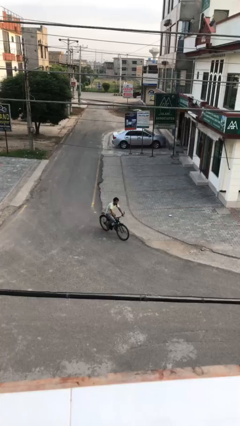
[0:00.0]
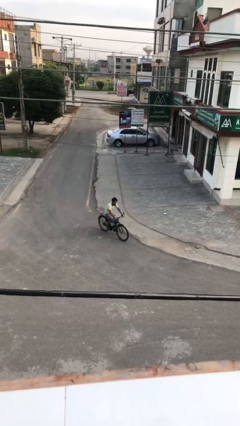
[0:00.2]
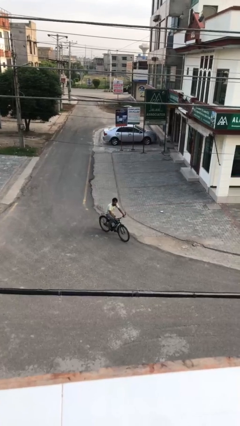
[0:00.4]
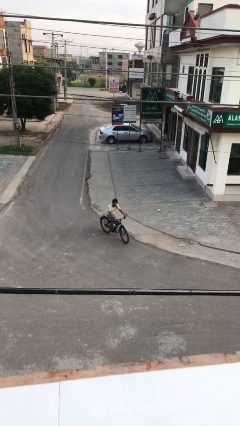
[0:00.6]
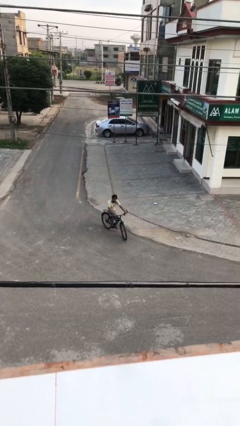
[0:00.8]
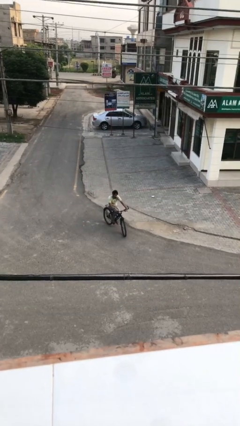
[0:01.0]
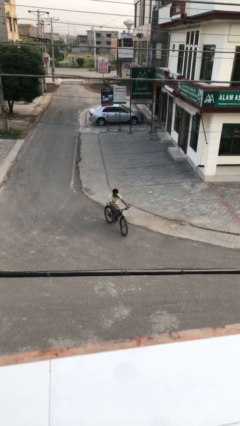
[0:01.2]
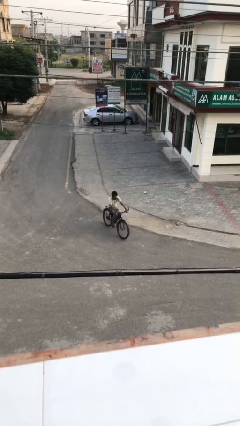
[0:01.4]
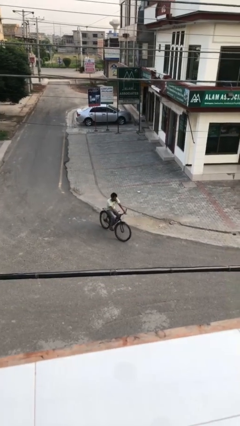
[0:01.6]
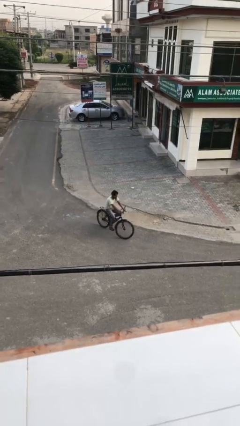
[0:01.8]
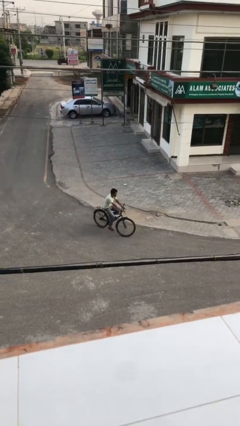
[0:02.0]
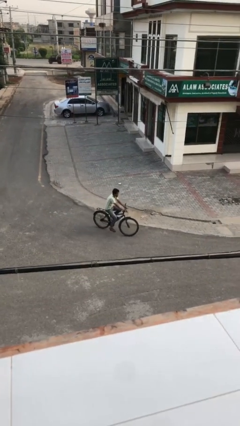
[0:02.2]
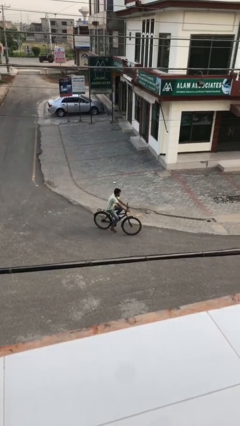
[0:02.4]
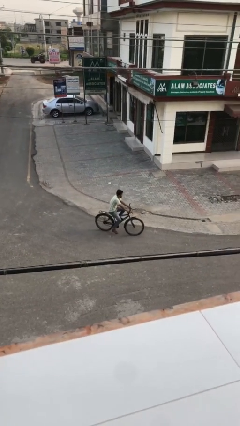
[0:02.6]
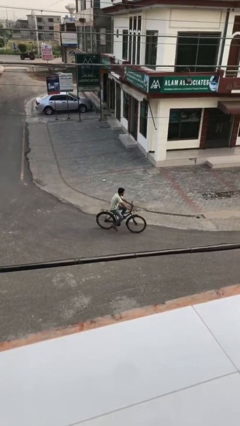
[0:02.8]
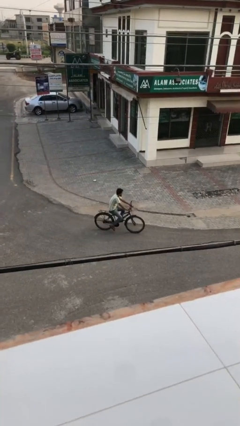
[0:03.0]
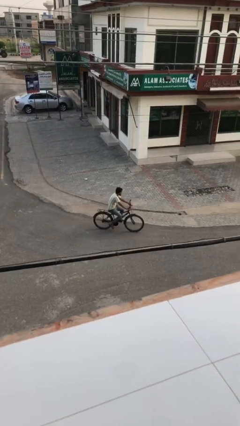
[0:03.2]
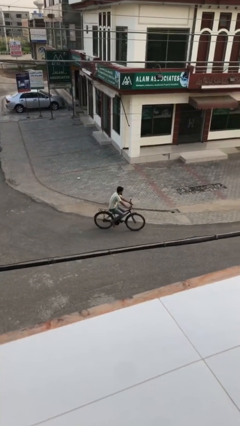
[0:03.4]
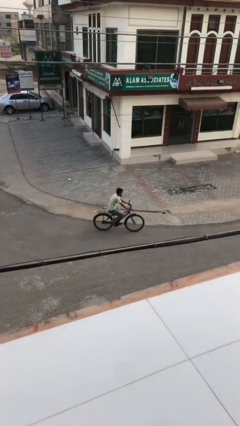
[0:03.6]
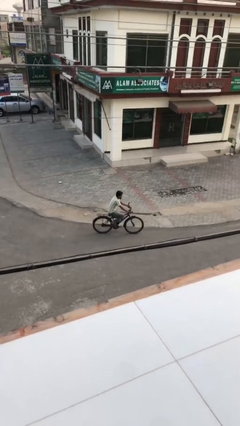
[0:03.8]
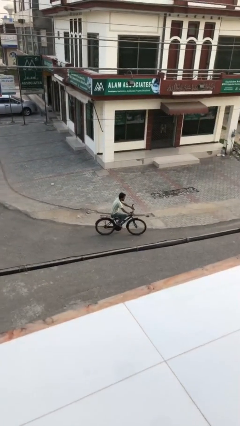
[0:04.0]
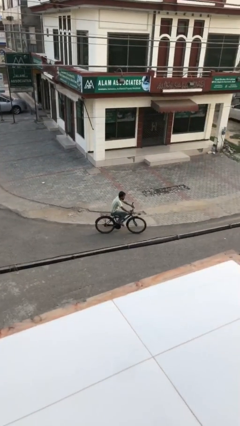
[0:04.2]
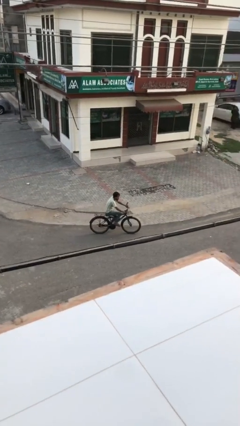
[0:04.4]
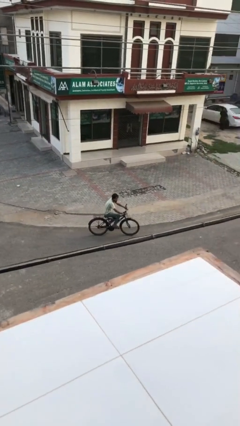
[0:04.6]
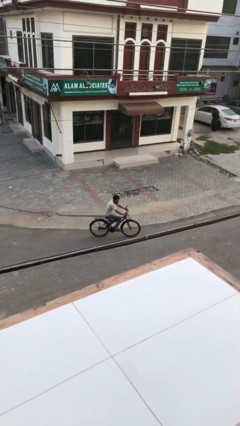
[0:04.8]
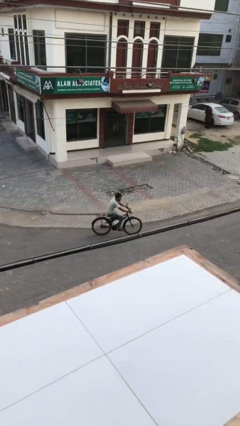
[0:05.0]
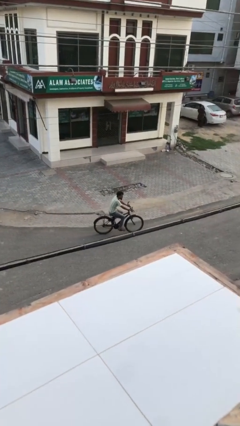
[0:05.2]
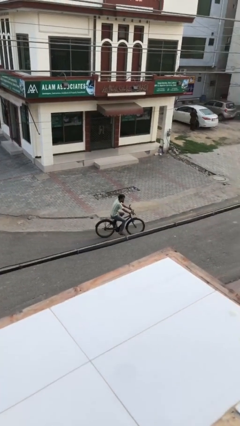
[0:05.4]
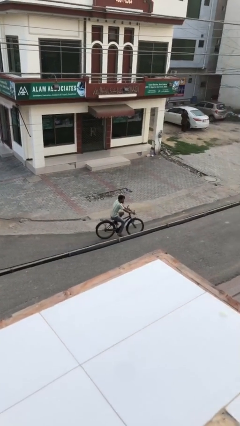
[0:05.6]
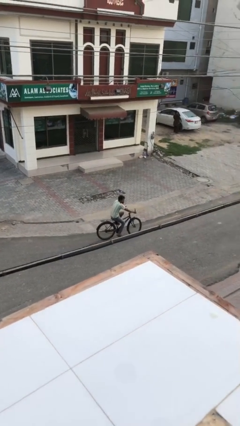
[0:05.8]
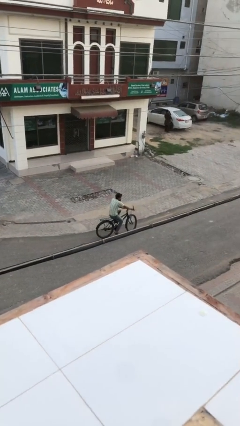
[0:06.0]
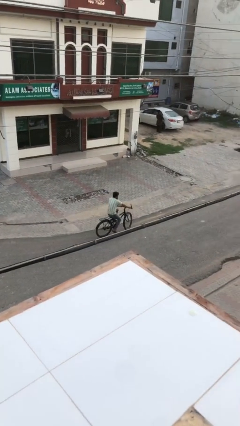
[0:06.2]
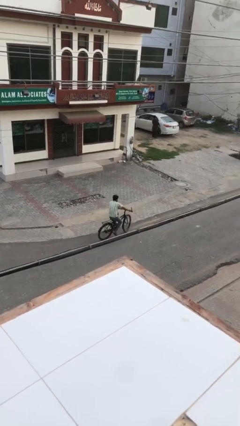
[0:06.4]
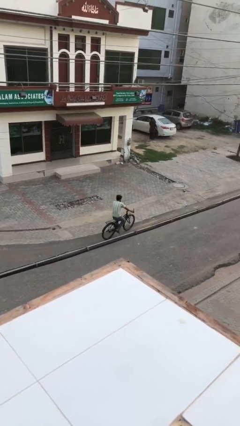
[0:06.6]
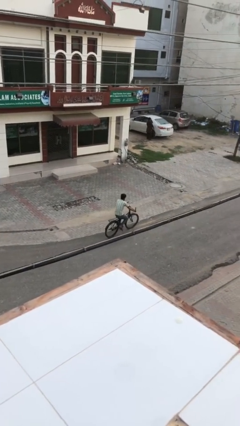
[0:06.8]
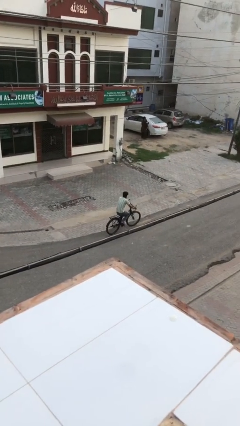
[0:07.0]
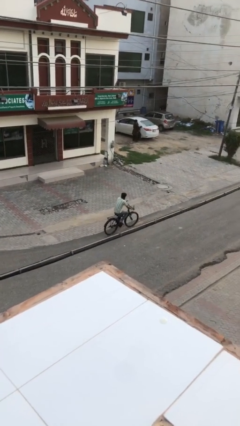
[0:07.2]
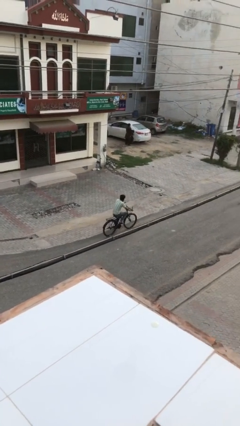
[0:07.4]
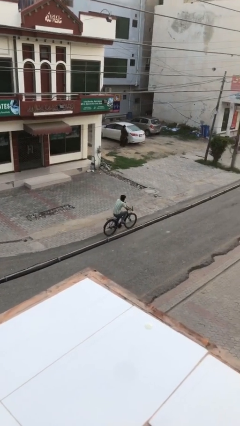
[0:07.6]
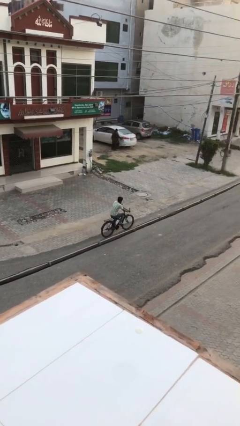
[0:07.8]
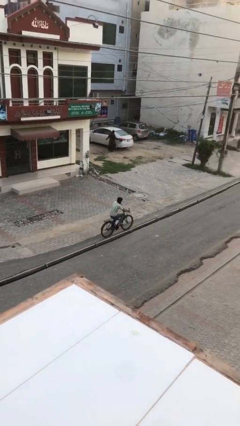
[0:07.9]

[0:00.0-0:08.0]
person rides bicycle

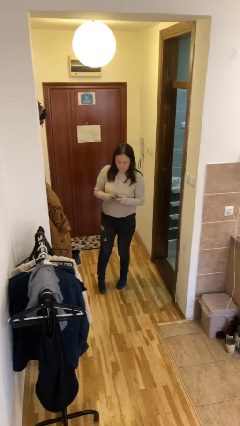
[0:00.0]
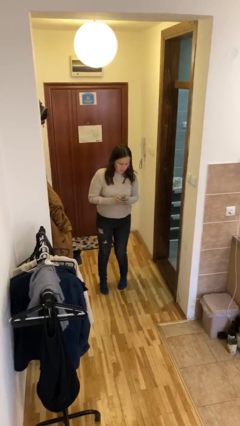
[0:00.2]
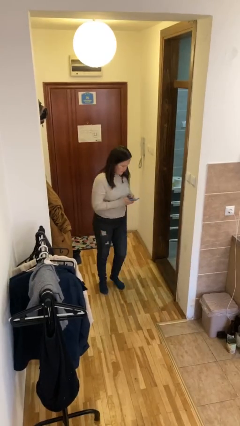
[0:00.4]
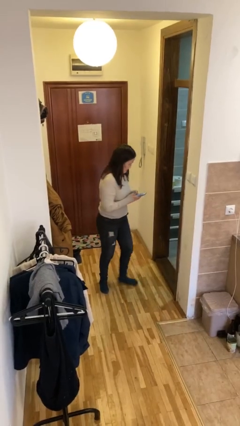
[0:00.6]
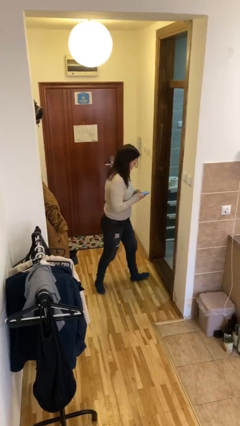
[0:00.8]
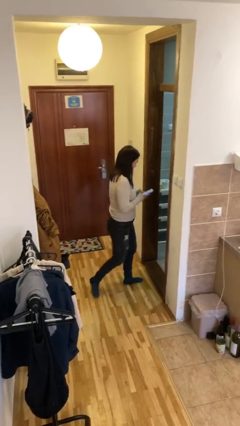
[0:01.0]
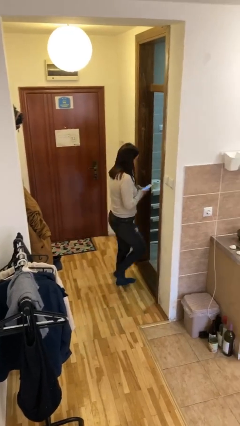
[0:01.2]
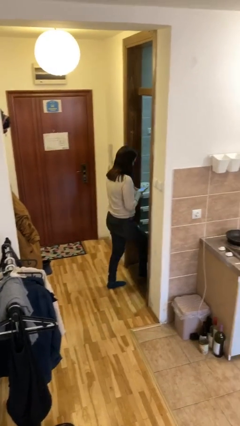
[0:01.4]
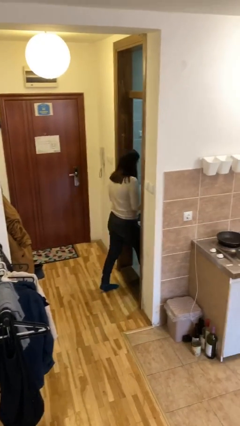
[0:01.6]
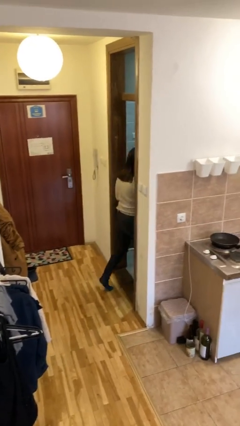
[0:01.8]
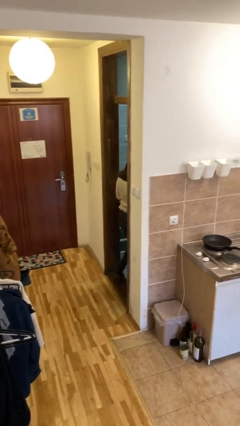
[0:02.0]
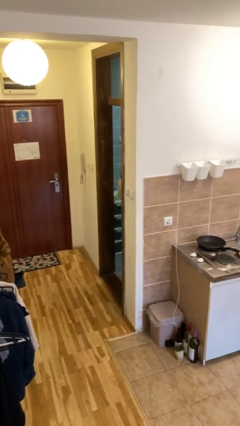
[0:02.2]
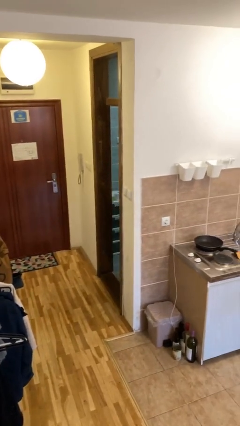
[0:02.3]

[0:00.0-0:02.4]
person exits scene through structure

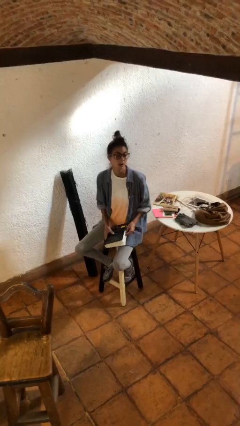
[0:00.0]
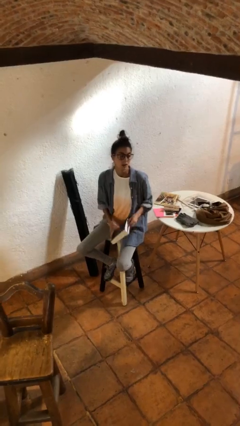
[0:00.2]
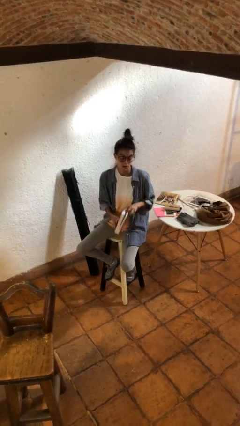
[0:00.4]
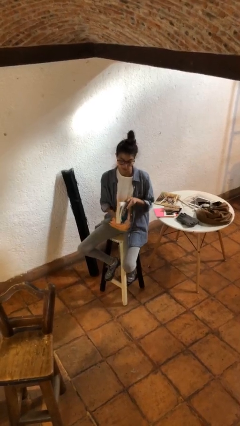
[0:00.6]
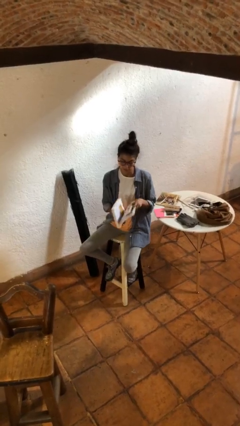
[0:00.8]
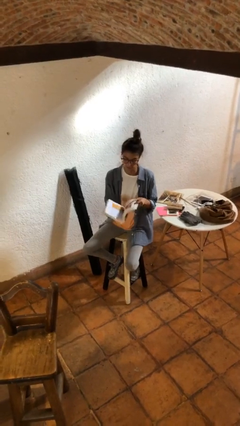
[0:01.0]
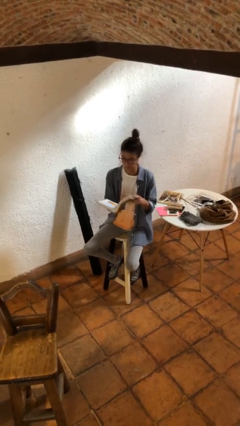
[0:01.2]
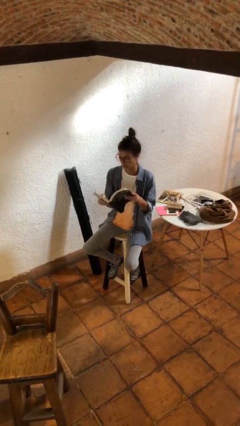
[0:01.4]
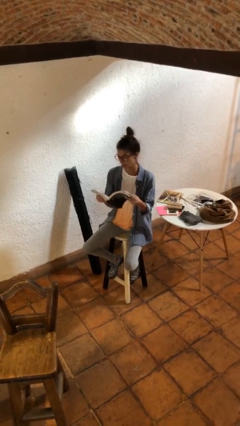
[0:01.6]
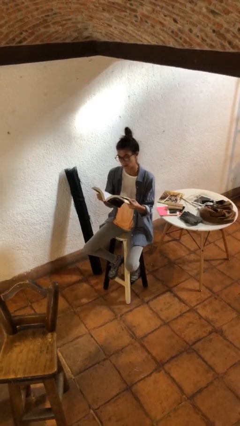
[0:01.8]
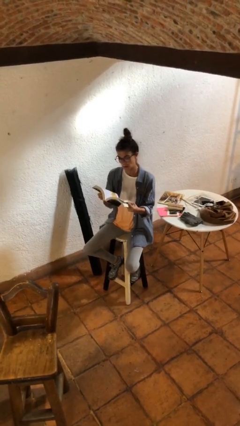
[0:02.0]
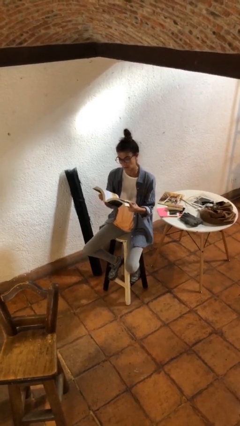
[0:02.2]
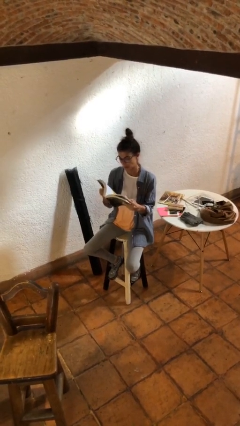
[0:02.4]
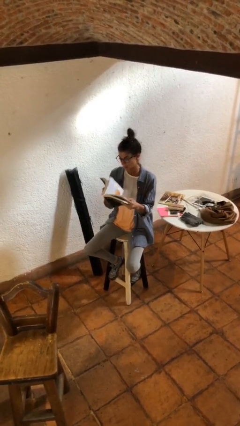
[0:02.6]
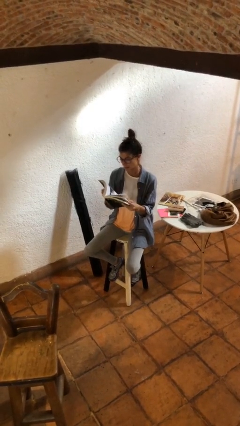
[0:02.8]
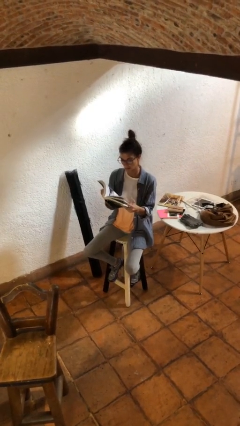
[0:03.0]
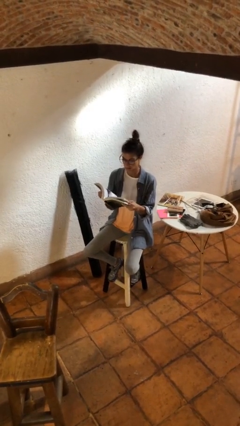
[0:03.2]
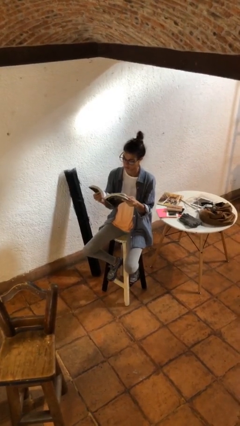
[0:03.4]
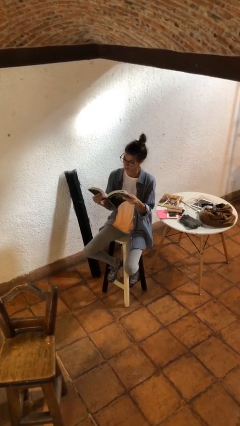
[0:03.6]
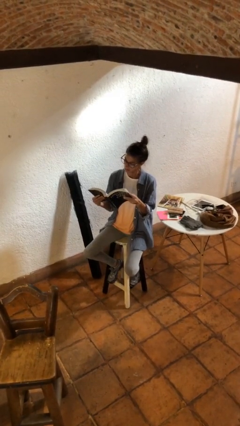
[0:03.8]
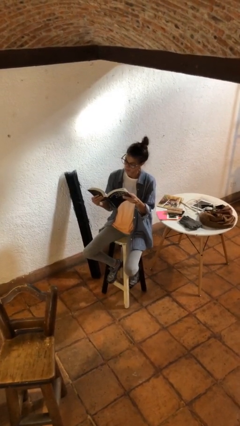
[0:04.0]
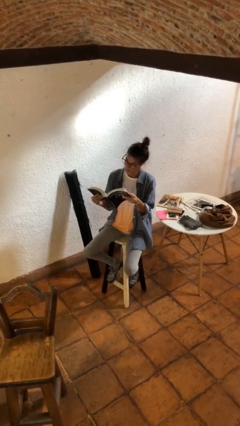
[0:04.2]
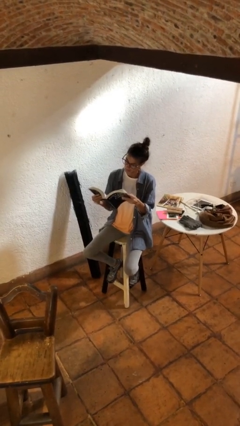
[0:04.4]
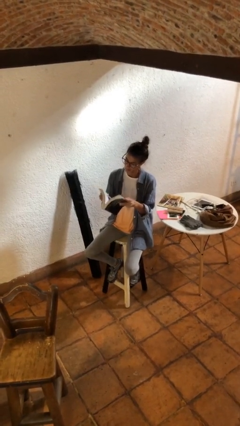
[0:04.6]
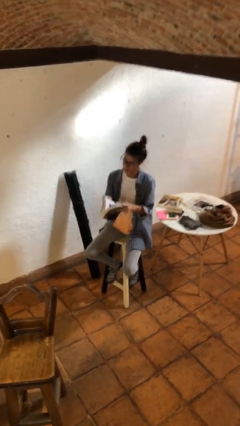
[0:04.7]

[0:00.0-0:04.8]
person reads book

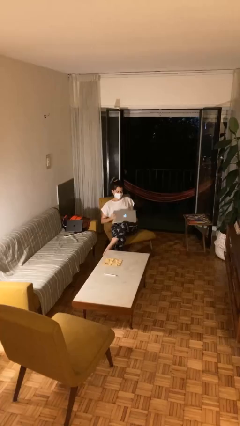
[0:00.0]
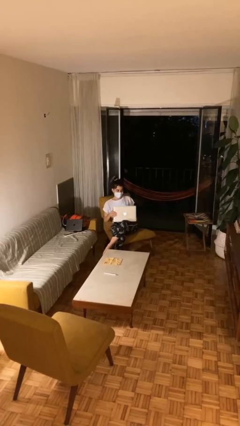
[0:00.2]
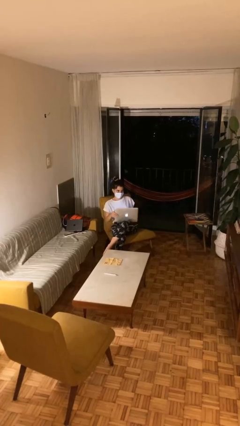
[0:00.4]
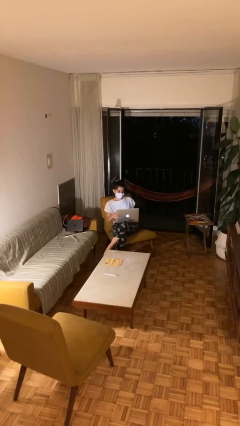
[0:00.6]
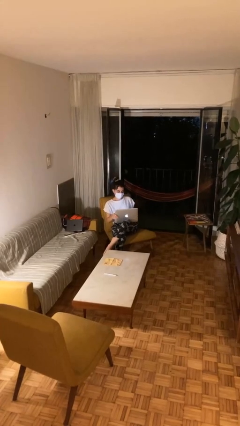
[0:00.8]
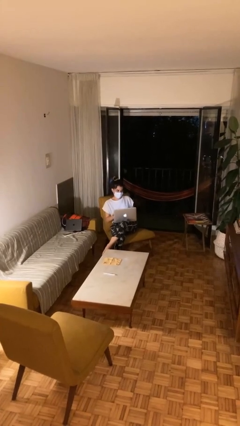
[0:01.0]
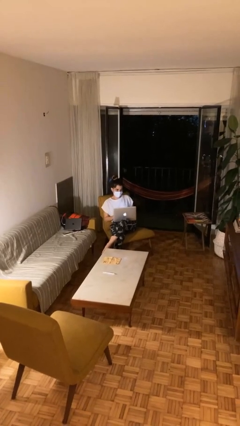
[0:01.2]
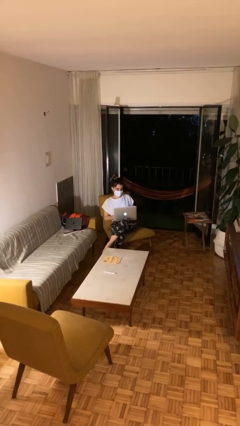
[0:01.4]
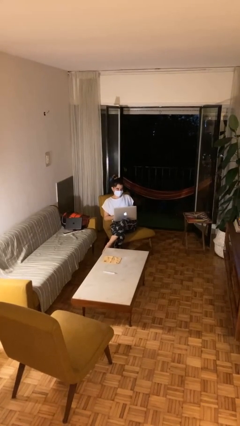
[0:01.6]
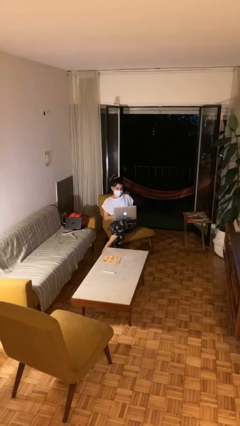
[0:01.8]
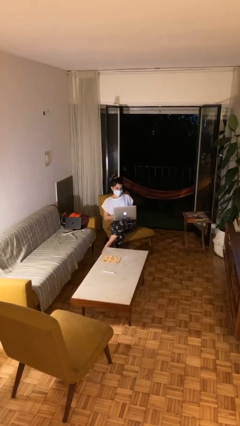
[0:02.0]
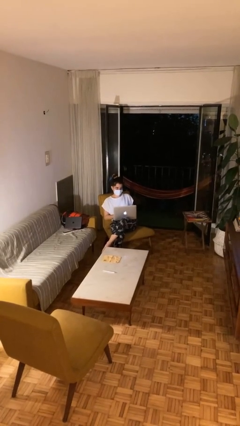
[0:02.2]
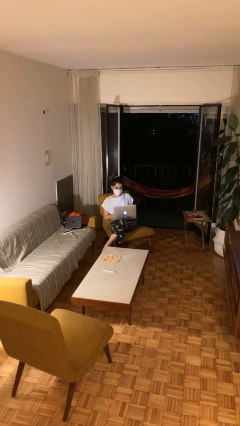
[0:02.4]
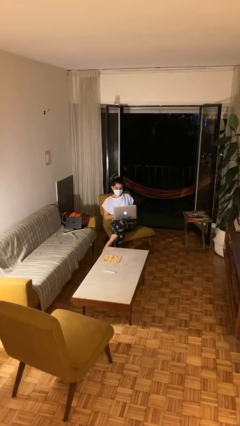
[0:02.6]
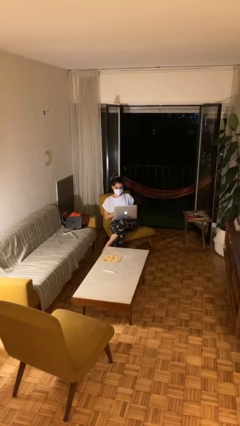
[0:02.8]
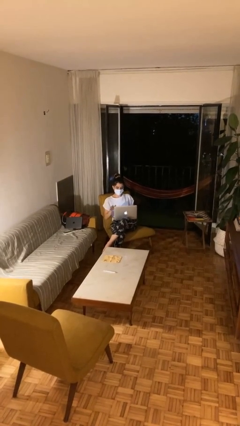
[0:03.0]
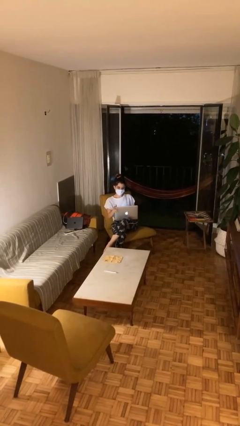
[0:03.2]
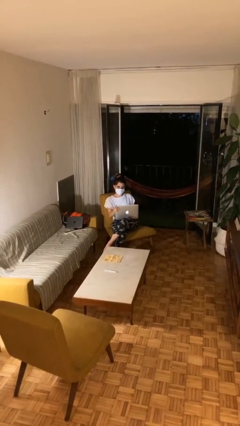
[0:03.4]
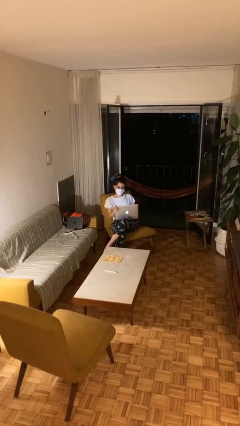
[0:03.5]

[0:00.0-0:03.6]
person interacts with laptop
